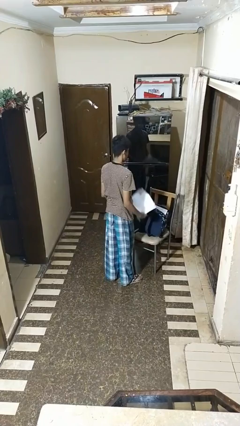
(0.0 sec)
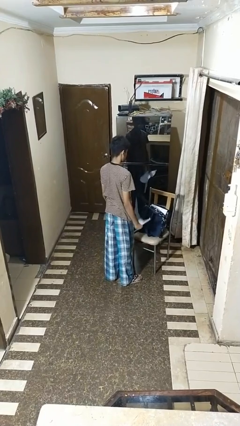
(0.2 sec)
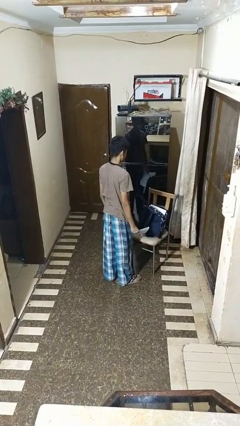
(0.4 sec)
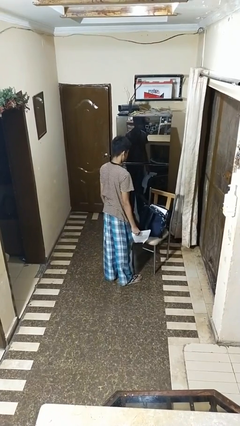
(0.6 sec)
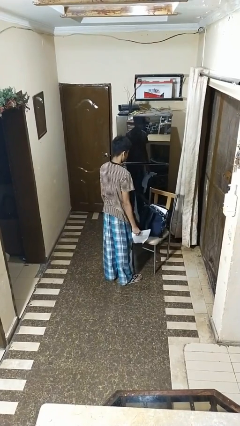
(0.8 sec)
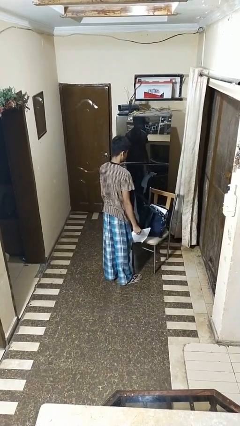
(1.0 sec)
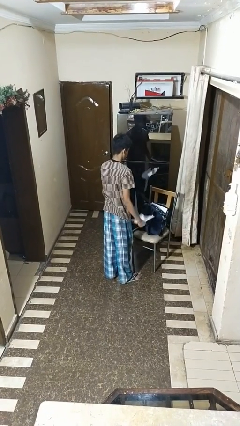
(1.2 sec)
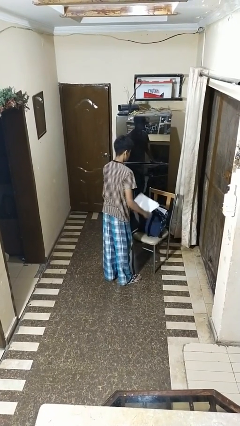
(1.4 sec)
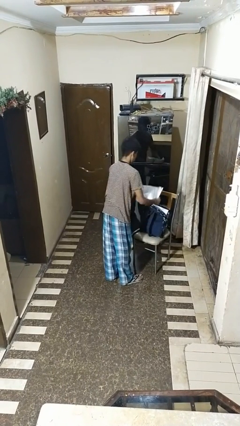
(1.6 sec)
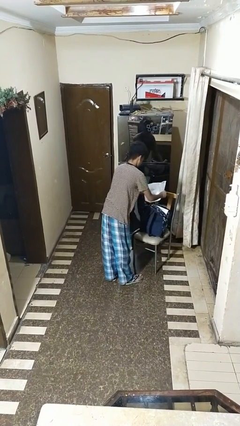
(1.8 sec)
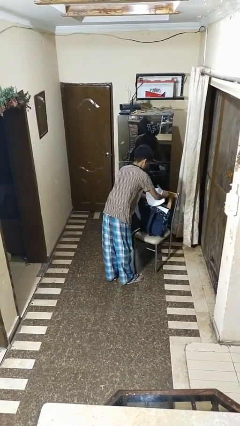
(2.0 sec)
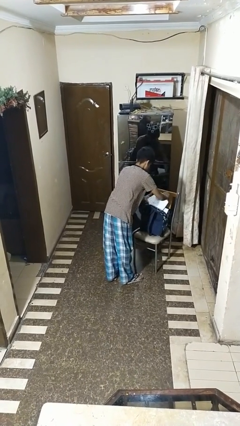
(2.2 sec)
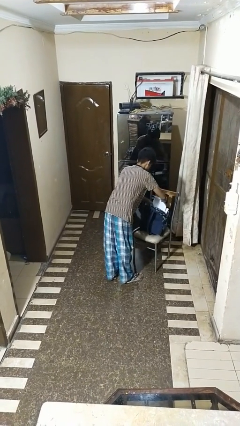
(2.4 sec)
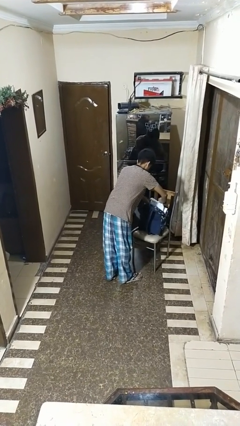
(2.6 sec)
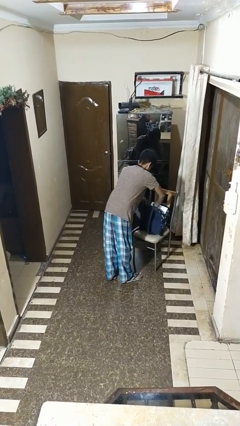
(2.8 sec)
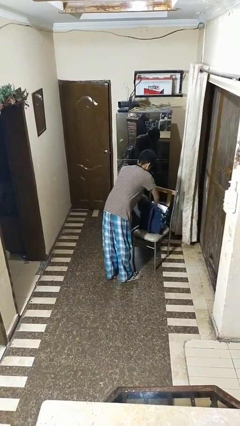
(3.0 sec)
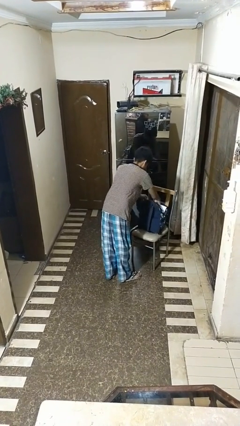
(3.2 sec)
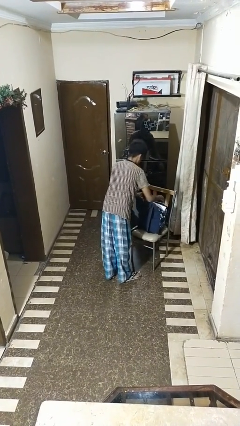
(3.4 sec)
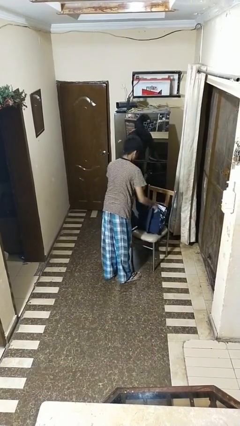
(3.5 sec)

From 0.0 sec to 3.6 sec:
person puts object into bag

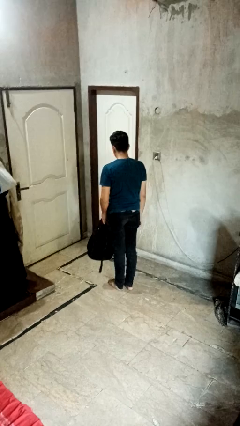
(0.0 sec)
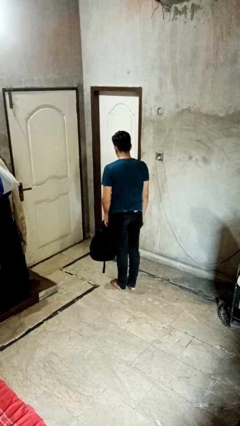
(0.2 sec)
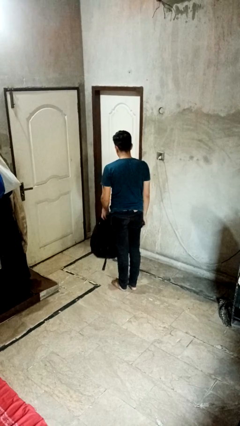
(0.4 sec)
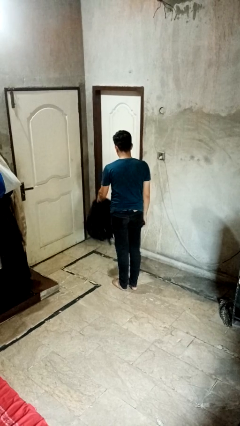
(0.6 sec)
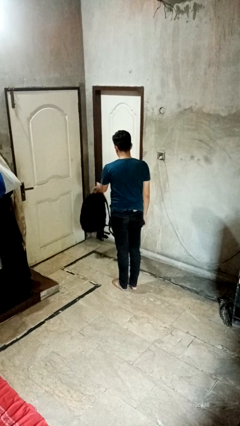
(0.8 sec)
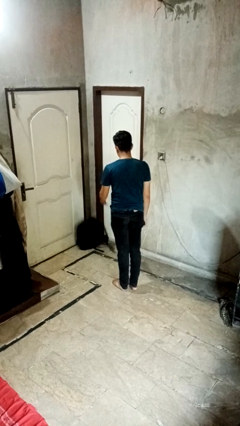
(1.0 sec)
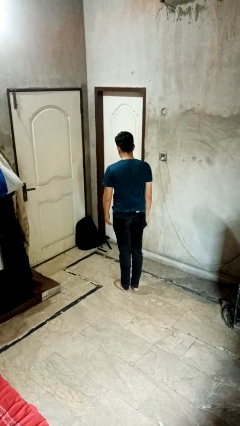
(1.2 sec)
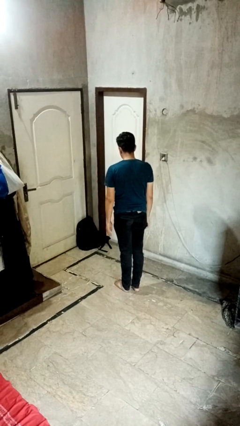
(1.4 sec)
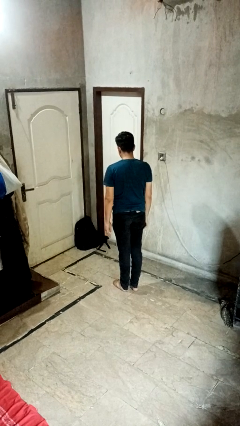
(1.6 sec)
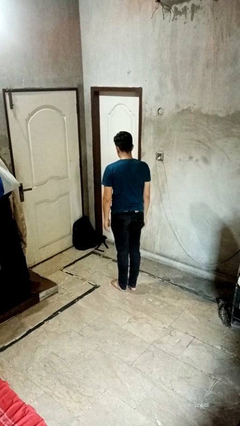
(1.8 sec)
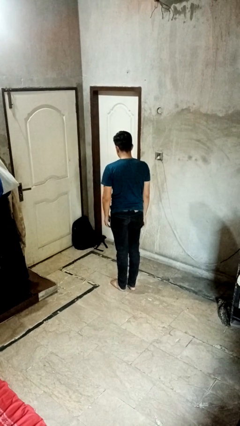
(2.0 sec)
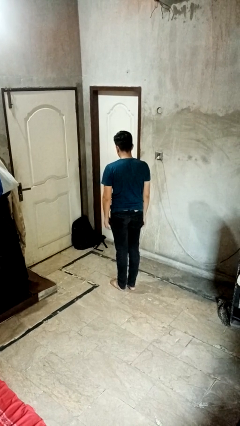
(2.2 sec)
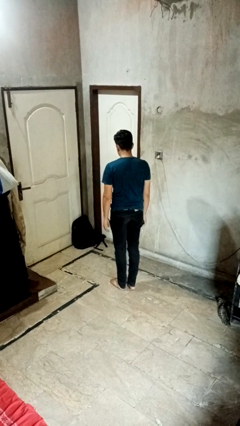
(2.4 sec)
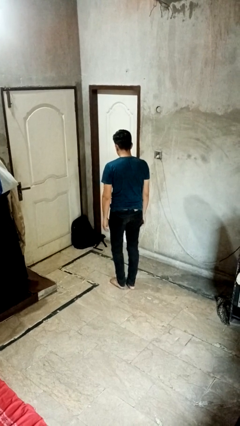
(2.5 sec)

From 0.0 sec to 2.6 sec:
person throws object to ground

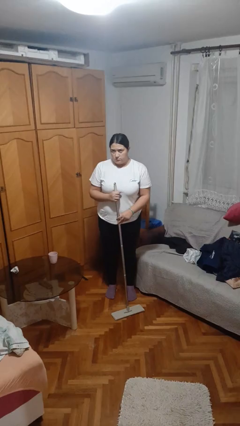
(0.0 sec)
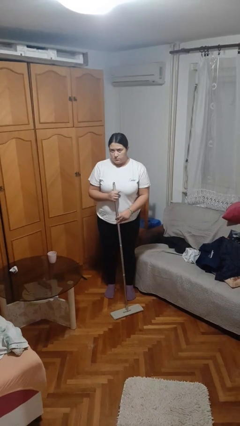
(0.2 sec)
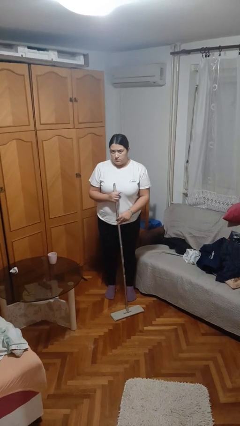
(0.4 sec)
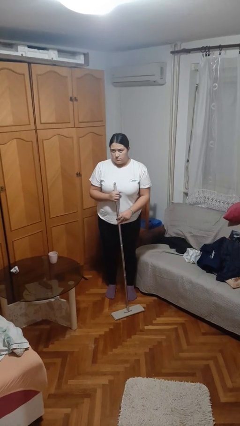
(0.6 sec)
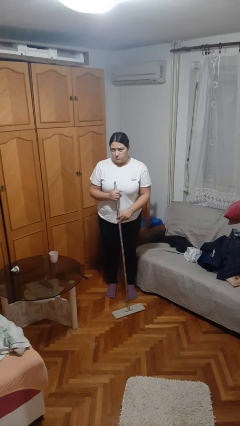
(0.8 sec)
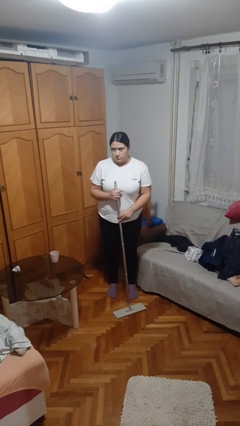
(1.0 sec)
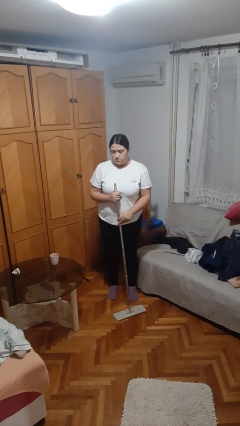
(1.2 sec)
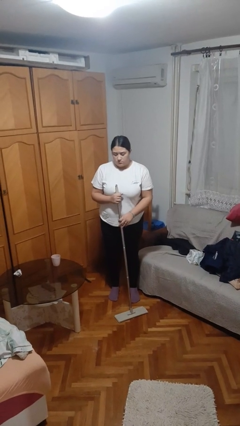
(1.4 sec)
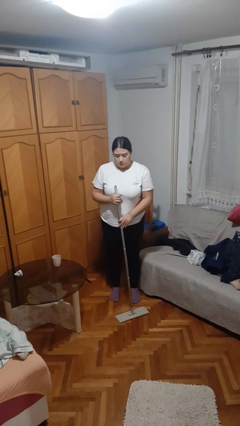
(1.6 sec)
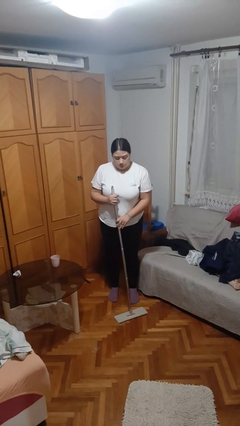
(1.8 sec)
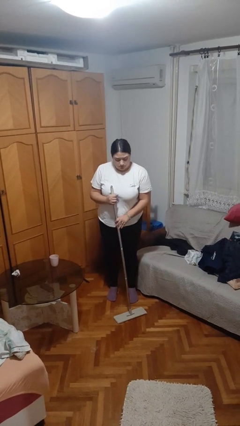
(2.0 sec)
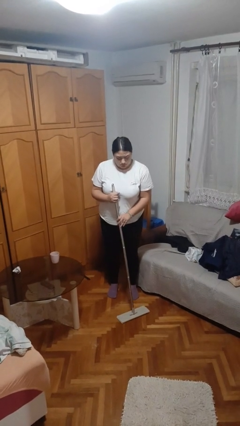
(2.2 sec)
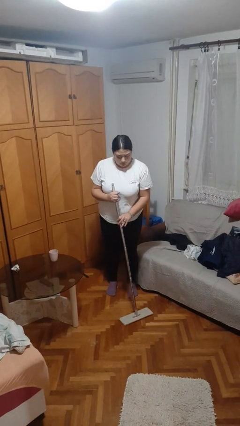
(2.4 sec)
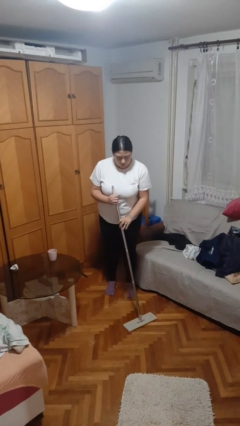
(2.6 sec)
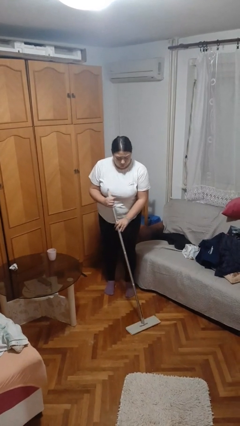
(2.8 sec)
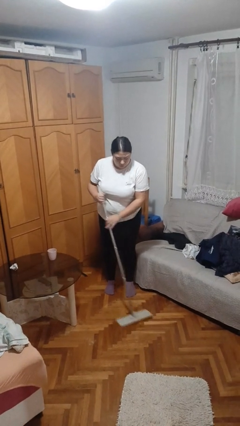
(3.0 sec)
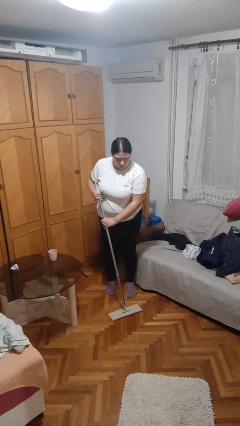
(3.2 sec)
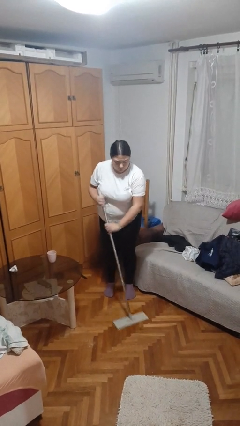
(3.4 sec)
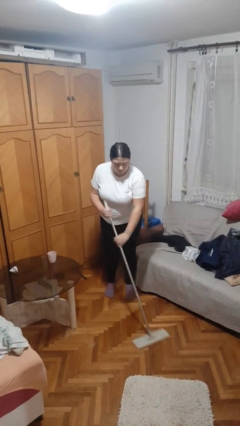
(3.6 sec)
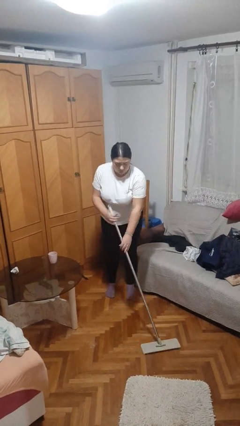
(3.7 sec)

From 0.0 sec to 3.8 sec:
person mops

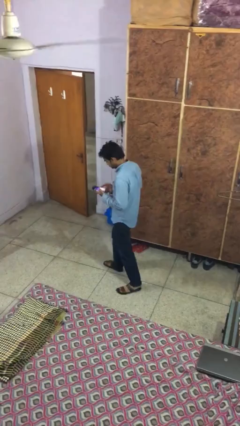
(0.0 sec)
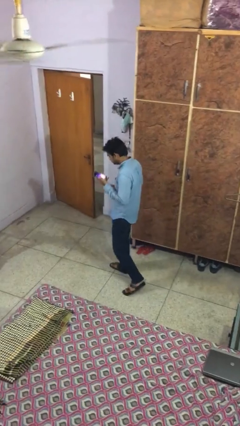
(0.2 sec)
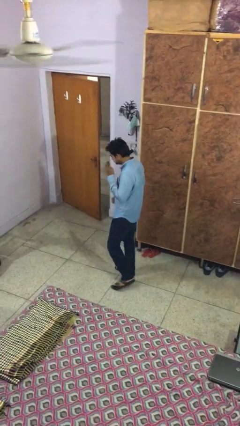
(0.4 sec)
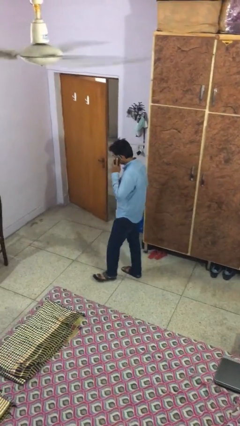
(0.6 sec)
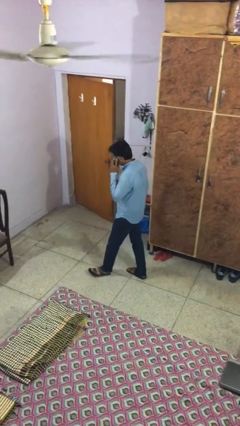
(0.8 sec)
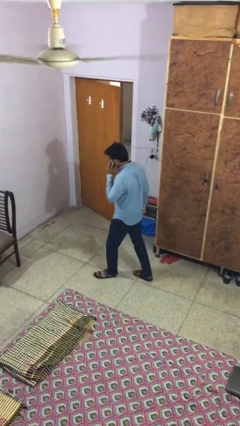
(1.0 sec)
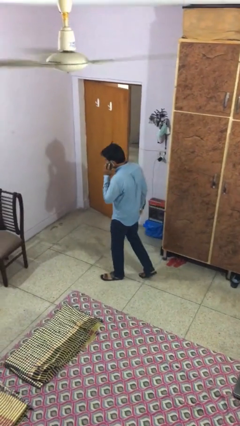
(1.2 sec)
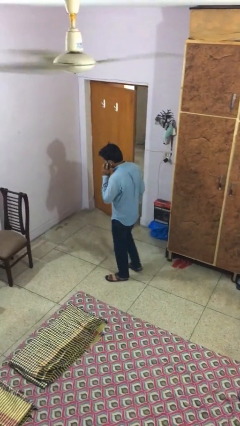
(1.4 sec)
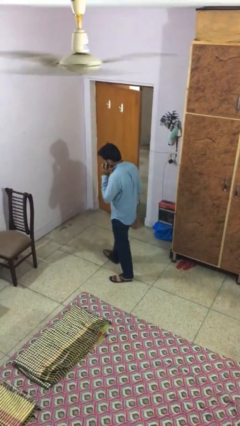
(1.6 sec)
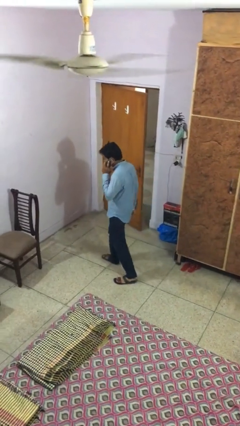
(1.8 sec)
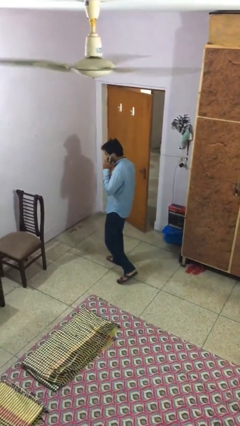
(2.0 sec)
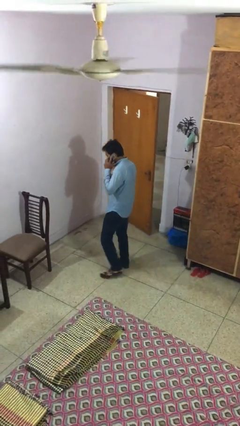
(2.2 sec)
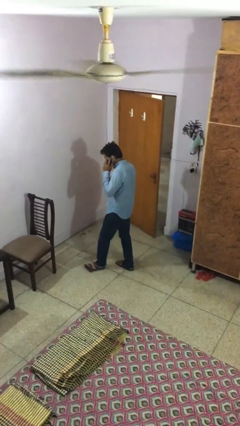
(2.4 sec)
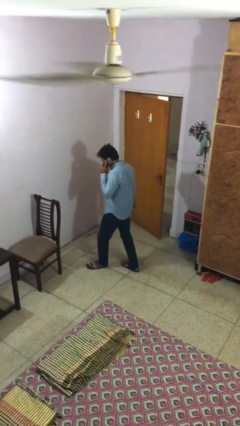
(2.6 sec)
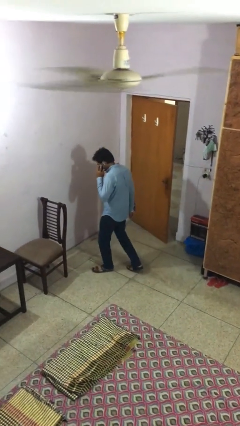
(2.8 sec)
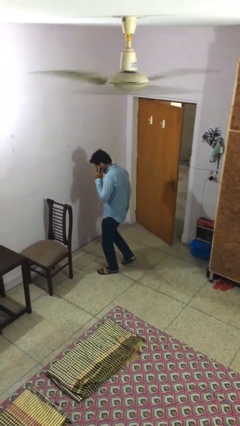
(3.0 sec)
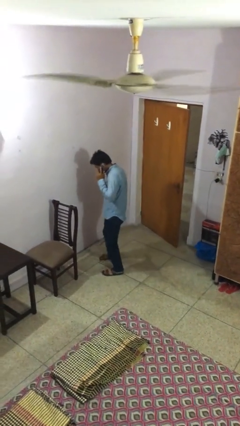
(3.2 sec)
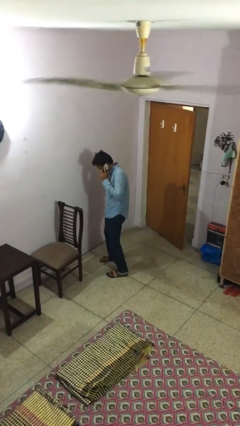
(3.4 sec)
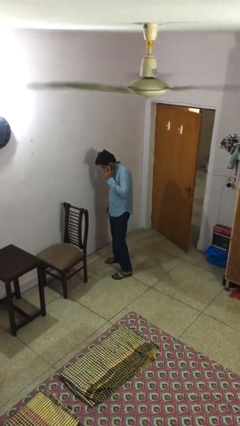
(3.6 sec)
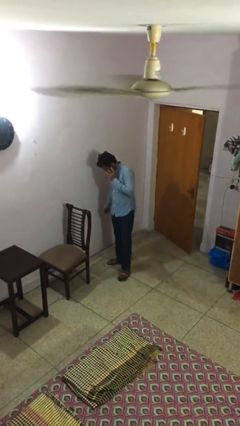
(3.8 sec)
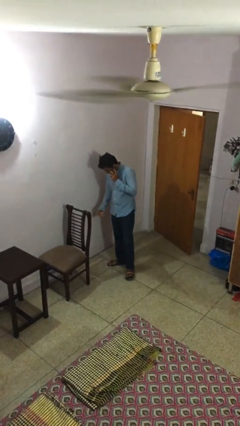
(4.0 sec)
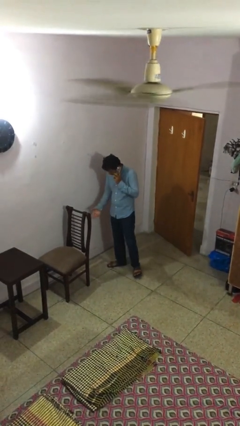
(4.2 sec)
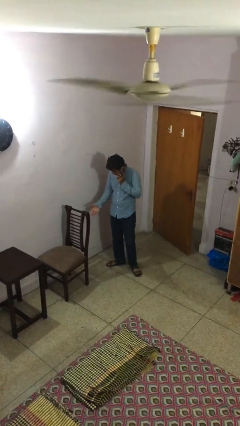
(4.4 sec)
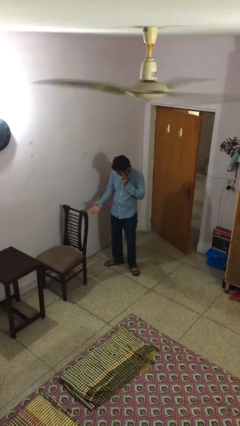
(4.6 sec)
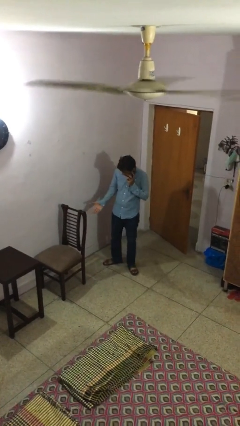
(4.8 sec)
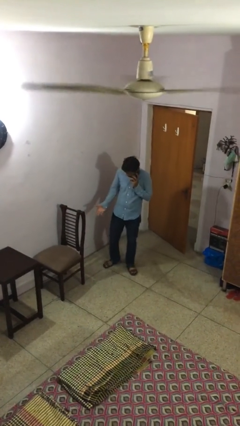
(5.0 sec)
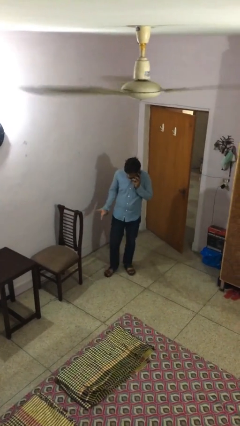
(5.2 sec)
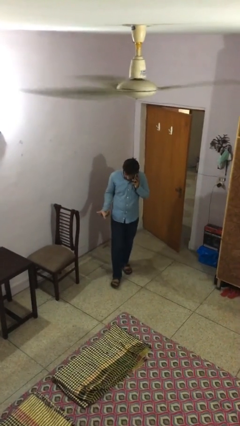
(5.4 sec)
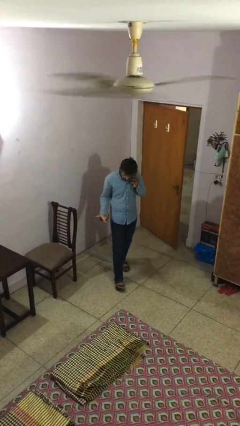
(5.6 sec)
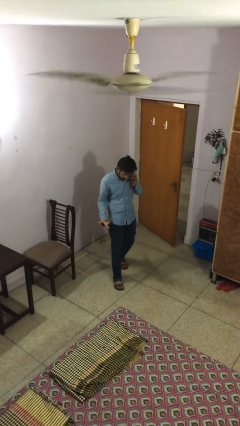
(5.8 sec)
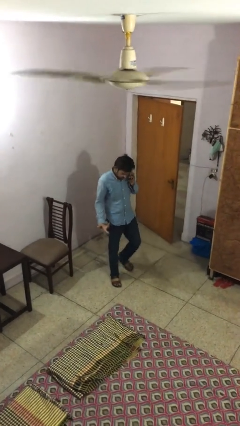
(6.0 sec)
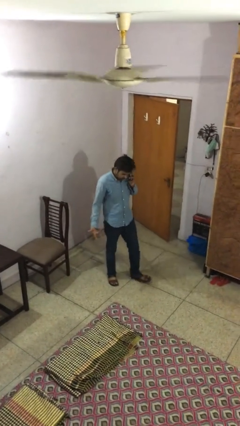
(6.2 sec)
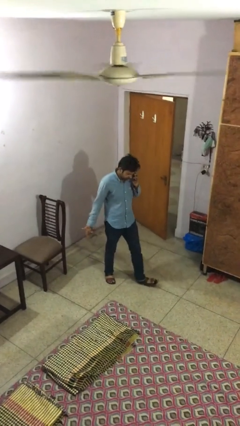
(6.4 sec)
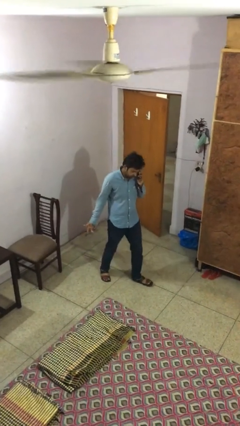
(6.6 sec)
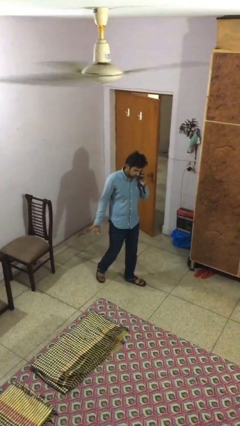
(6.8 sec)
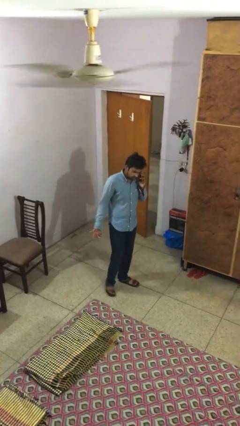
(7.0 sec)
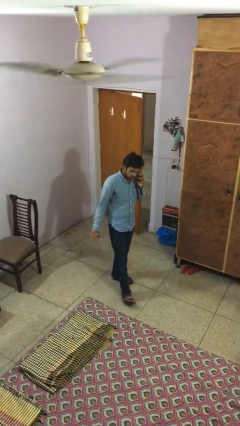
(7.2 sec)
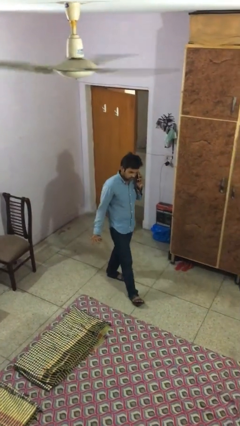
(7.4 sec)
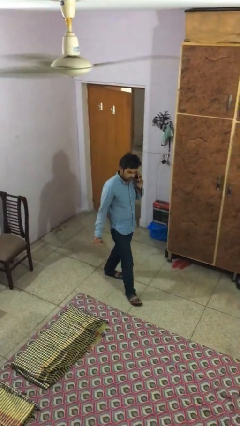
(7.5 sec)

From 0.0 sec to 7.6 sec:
person talks on phone
